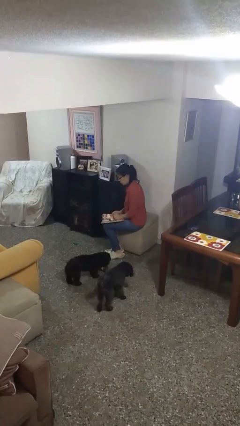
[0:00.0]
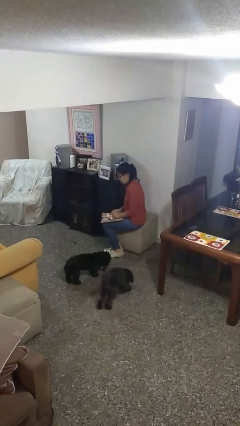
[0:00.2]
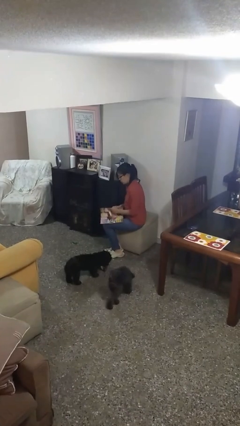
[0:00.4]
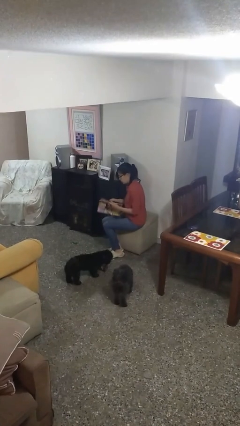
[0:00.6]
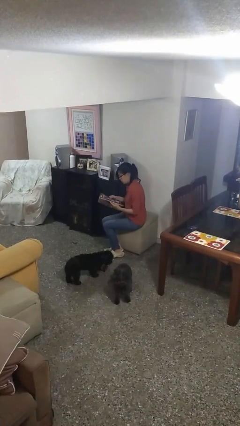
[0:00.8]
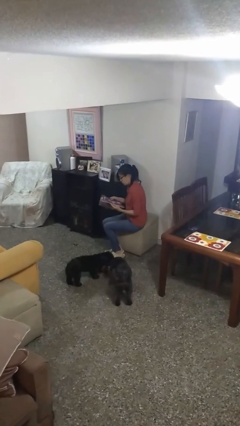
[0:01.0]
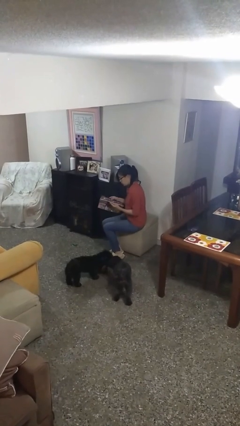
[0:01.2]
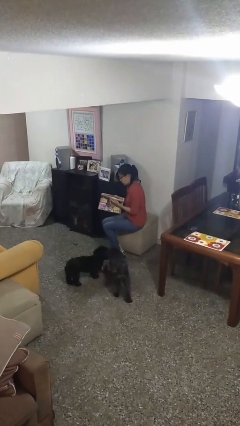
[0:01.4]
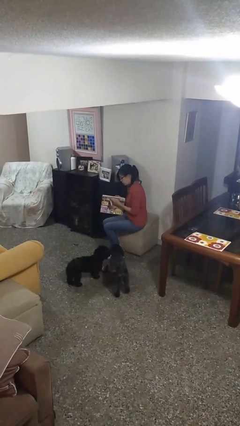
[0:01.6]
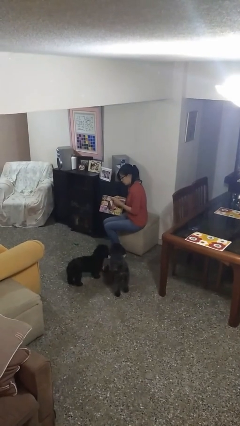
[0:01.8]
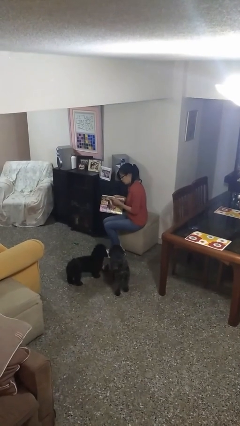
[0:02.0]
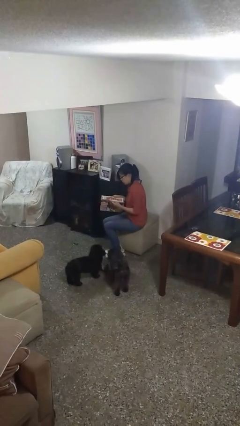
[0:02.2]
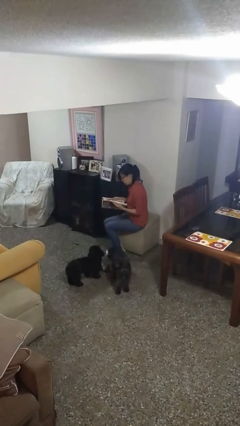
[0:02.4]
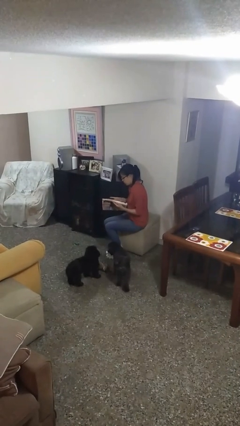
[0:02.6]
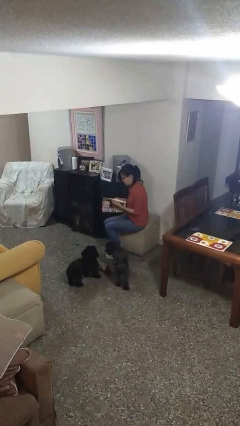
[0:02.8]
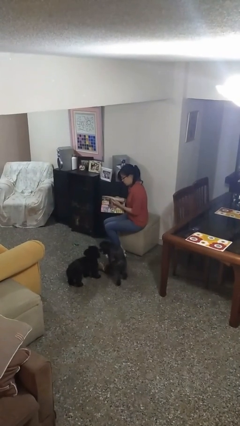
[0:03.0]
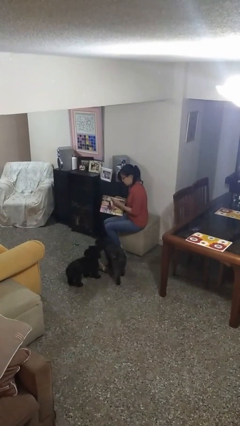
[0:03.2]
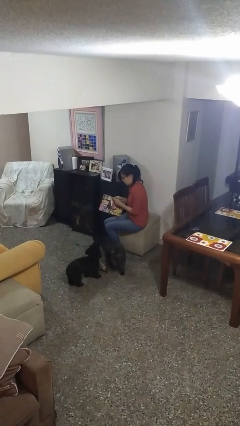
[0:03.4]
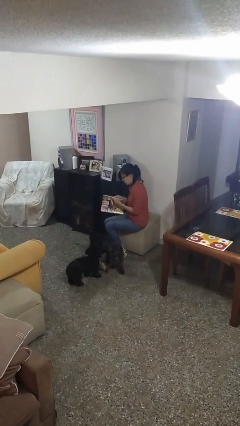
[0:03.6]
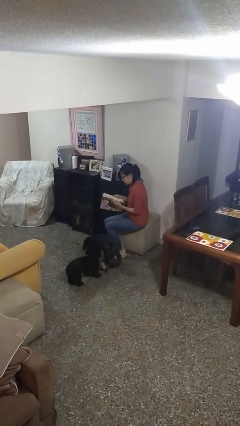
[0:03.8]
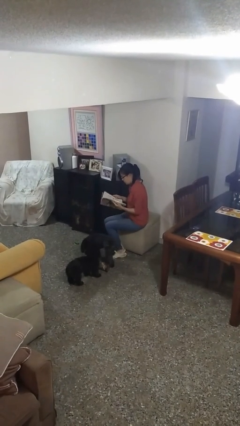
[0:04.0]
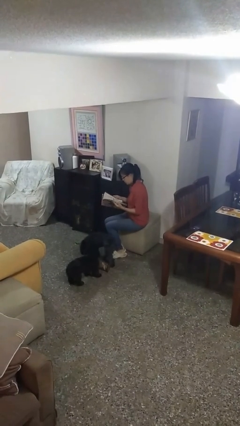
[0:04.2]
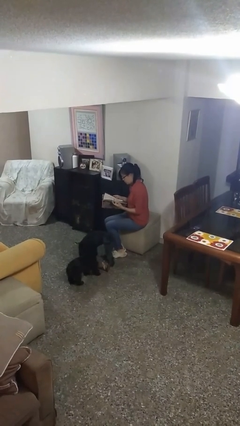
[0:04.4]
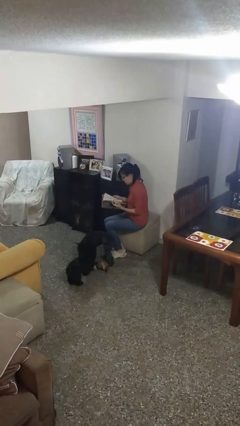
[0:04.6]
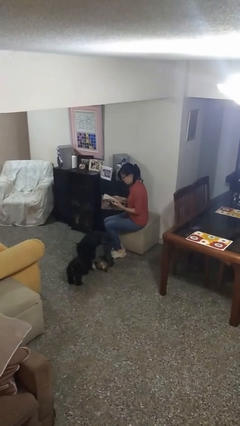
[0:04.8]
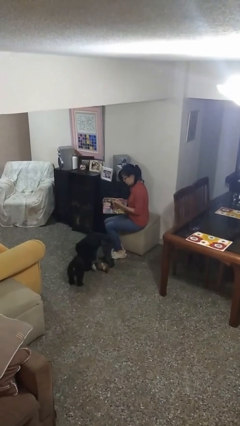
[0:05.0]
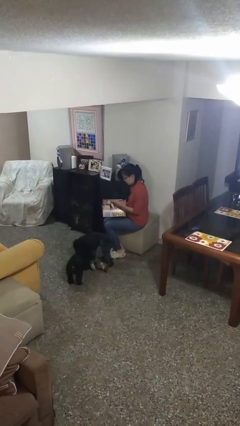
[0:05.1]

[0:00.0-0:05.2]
person reads magazine

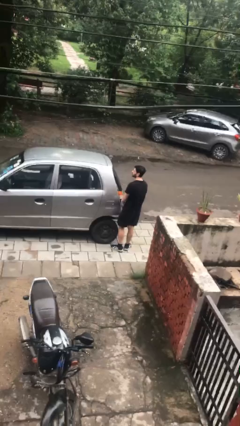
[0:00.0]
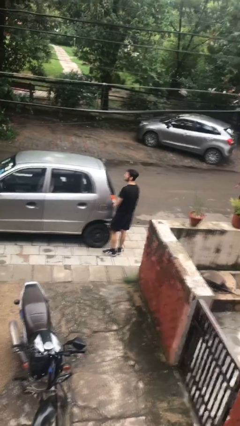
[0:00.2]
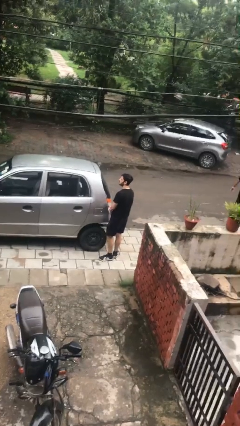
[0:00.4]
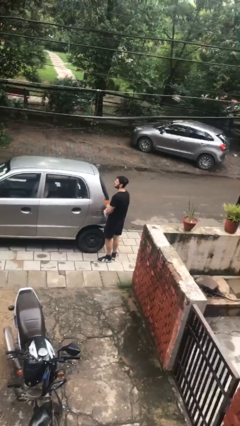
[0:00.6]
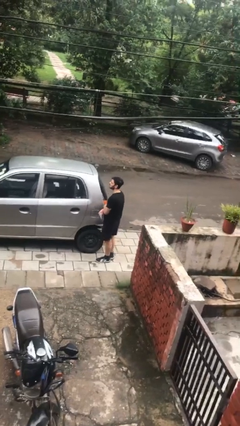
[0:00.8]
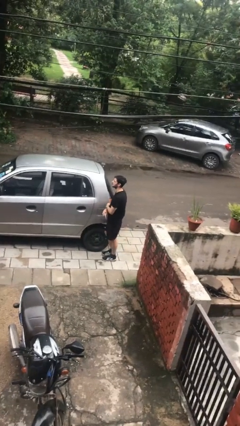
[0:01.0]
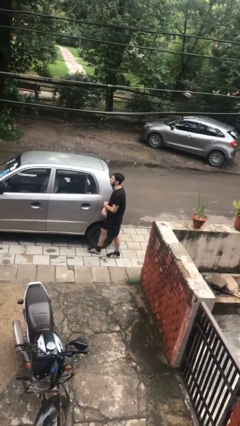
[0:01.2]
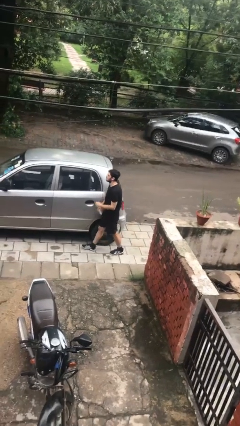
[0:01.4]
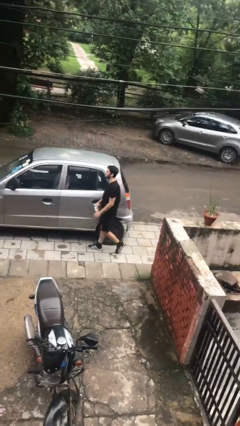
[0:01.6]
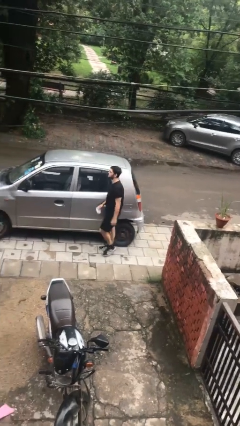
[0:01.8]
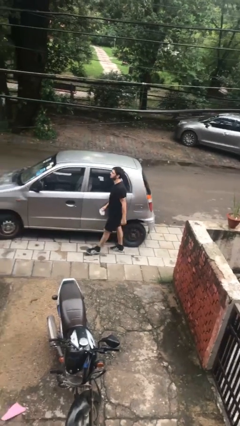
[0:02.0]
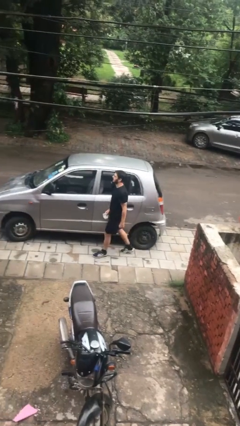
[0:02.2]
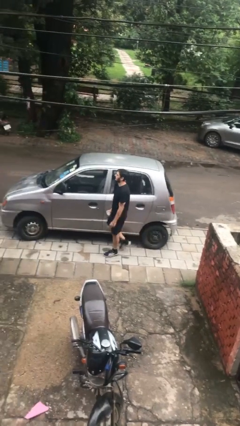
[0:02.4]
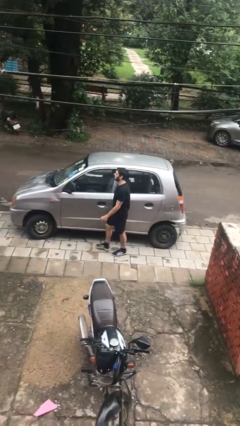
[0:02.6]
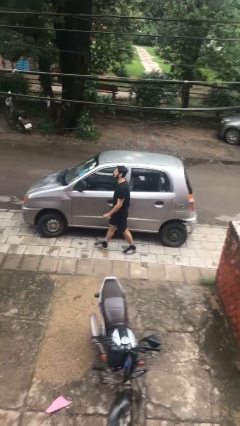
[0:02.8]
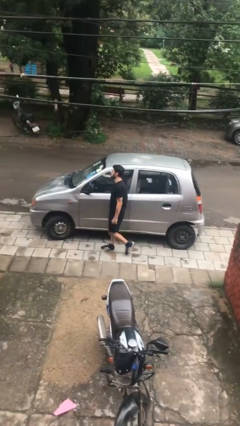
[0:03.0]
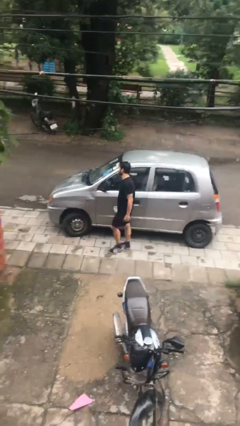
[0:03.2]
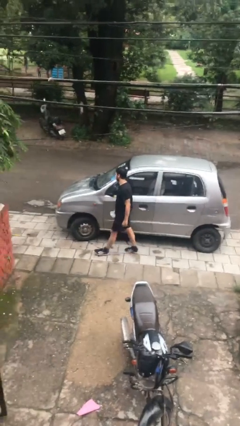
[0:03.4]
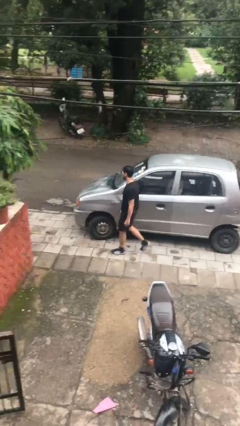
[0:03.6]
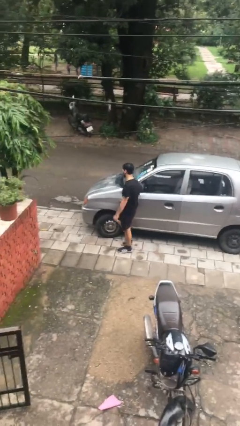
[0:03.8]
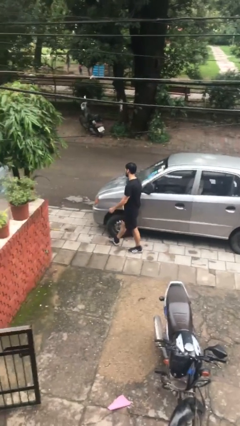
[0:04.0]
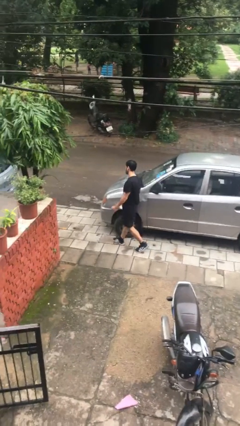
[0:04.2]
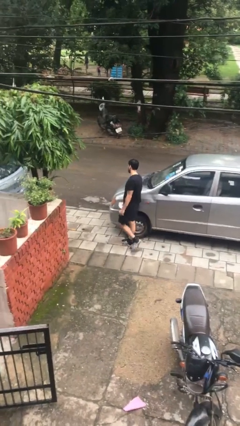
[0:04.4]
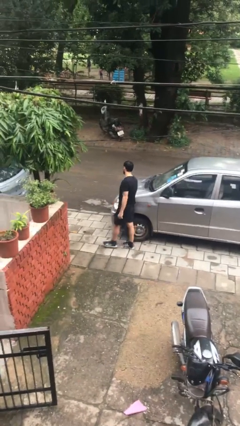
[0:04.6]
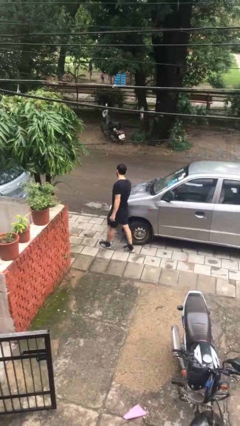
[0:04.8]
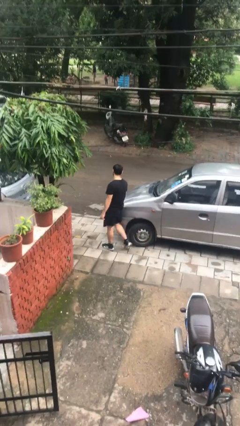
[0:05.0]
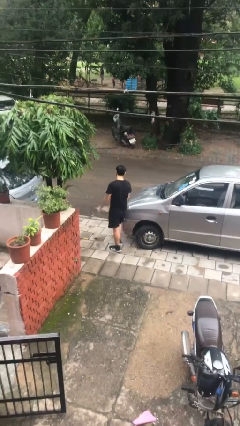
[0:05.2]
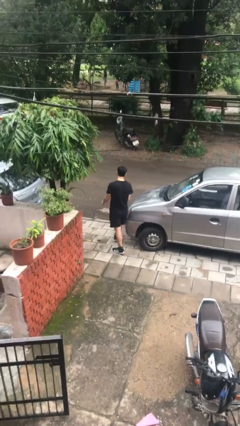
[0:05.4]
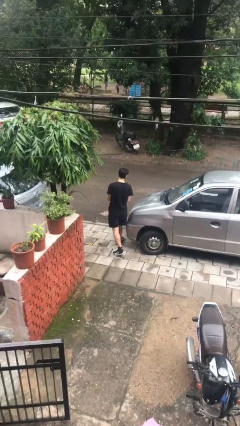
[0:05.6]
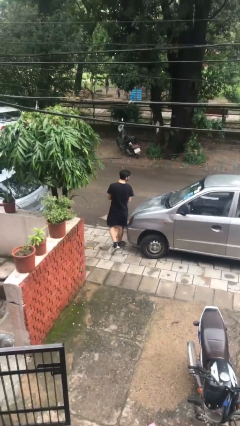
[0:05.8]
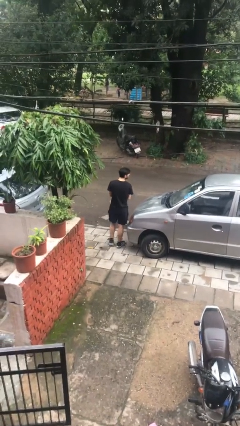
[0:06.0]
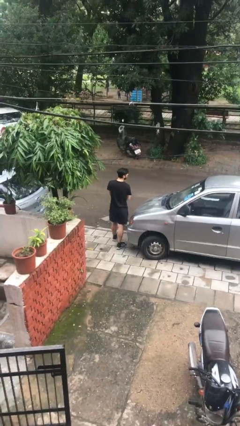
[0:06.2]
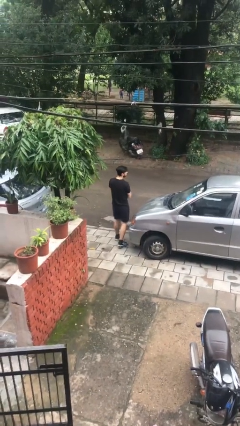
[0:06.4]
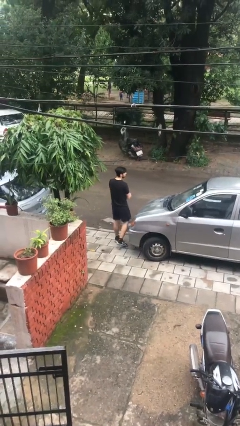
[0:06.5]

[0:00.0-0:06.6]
person walks around car

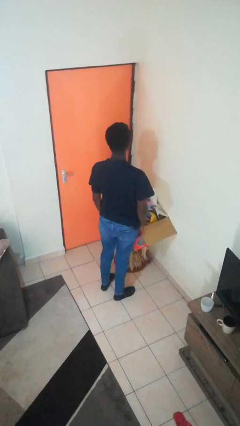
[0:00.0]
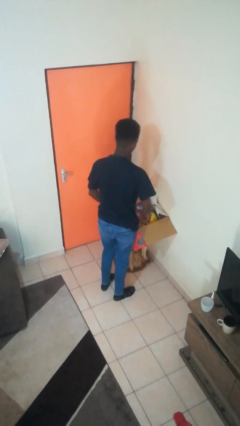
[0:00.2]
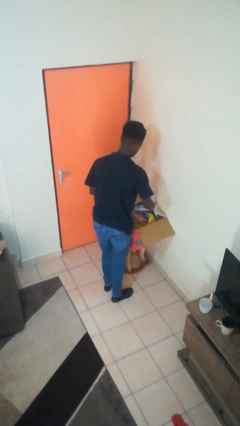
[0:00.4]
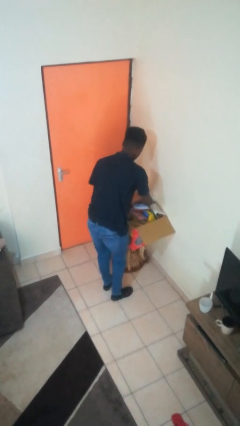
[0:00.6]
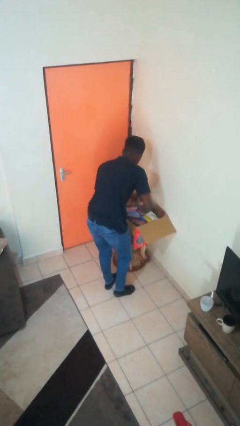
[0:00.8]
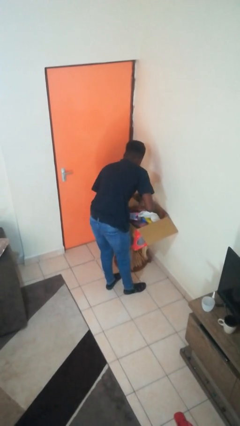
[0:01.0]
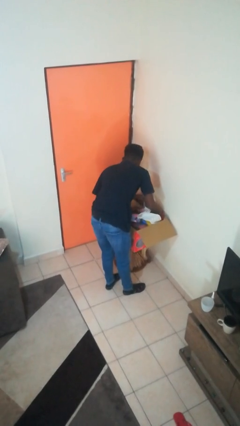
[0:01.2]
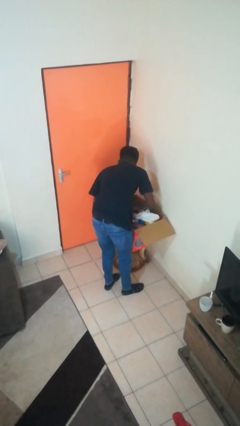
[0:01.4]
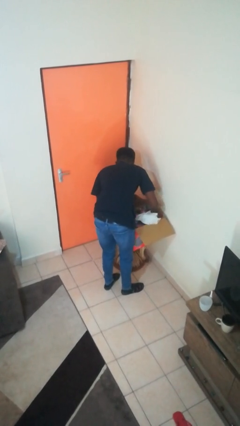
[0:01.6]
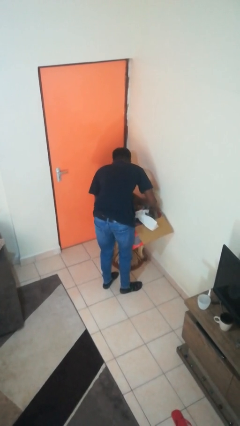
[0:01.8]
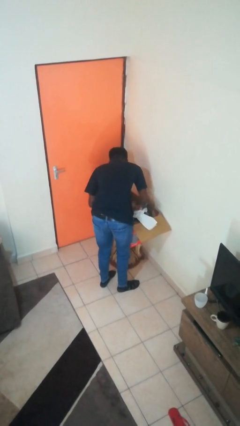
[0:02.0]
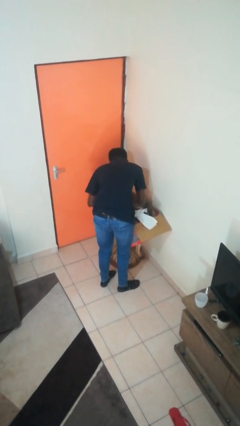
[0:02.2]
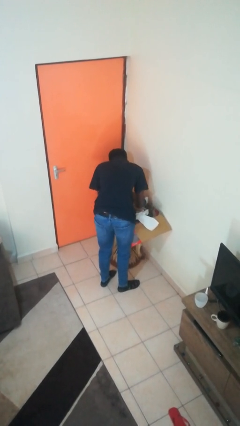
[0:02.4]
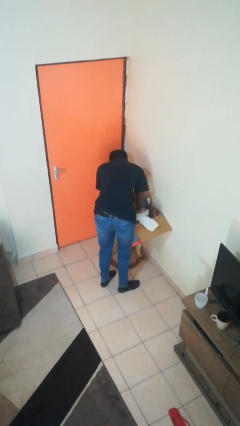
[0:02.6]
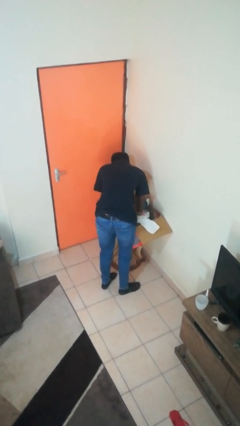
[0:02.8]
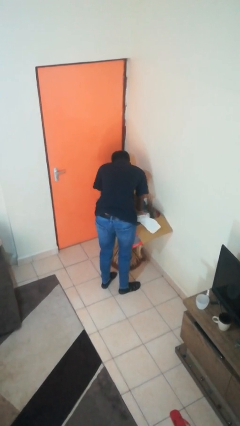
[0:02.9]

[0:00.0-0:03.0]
person searches in box

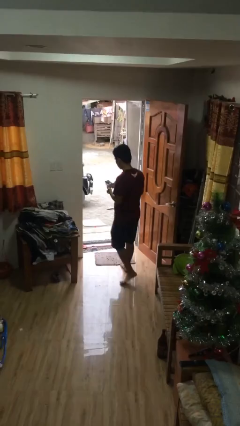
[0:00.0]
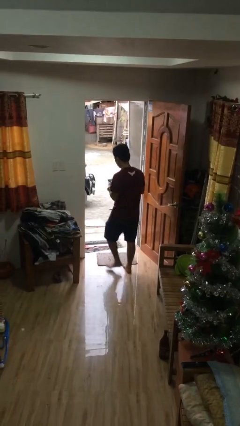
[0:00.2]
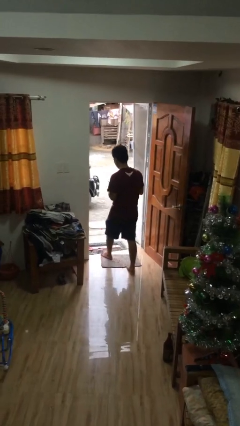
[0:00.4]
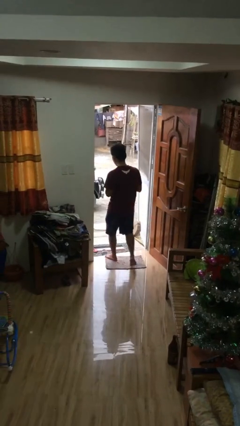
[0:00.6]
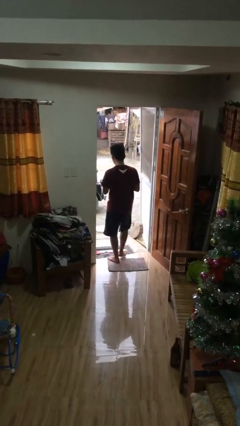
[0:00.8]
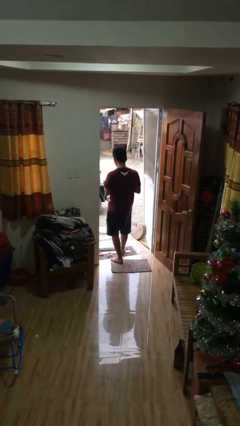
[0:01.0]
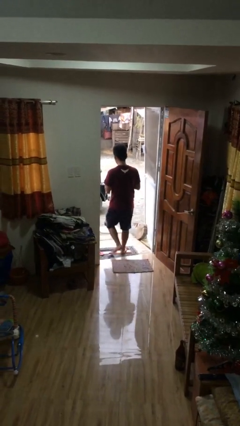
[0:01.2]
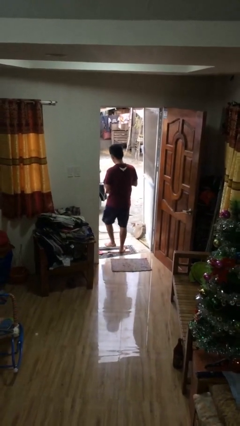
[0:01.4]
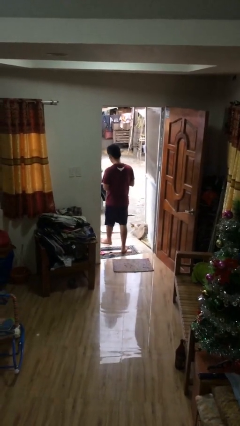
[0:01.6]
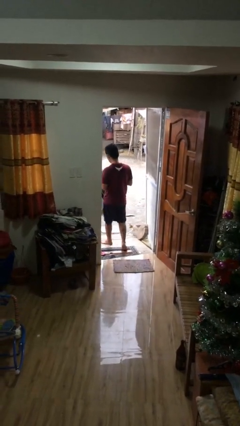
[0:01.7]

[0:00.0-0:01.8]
person exits scene through structure

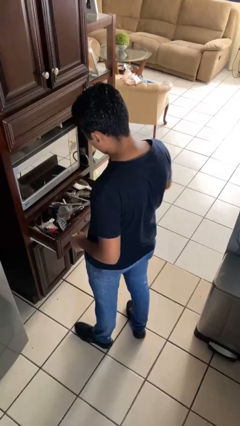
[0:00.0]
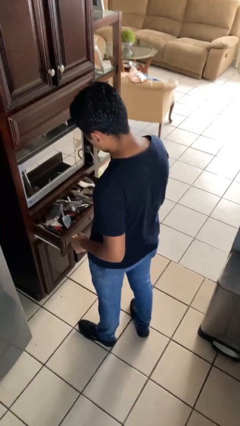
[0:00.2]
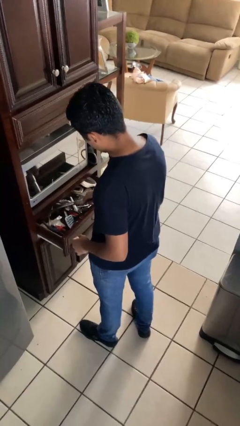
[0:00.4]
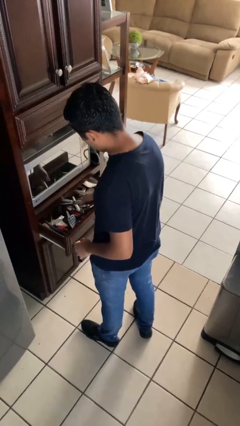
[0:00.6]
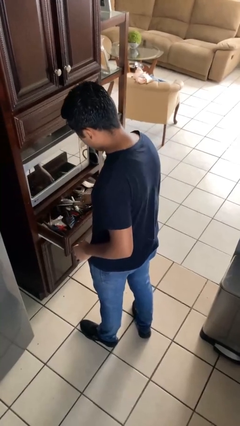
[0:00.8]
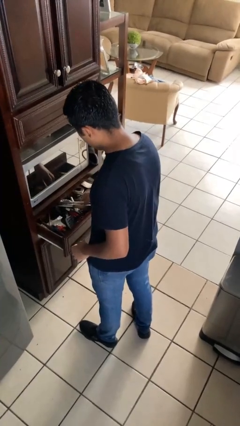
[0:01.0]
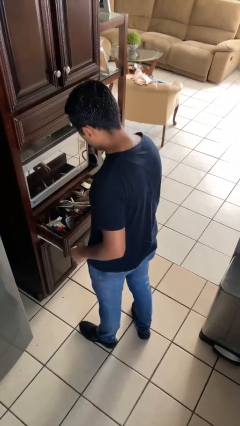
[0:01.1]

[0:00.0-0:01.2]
person puts object into kitchen drawer
